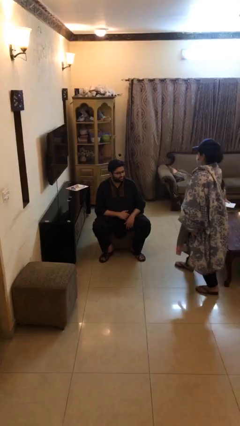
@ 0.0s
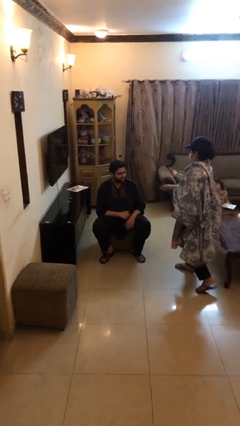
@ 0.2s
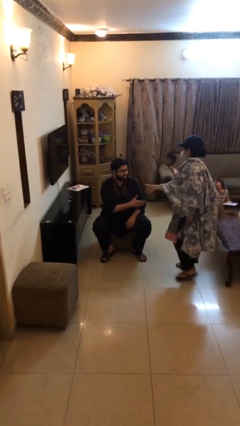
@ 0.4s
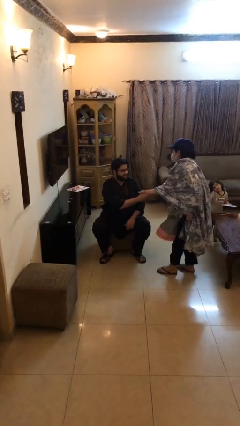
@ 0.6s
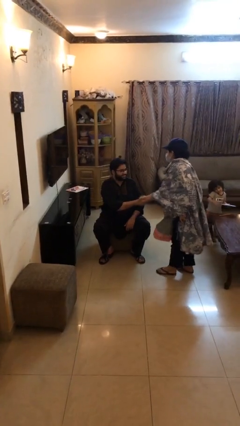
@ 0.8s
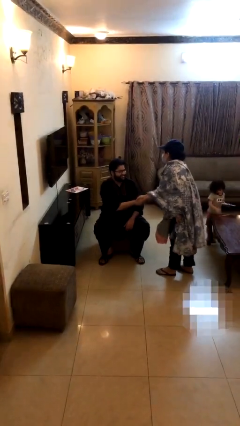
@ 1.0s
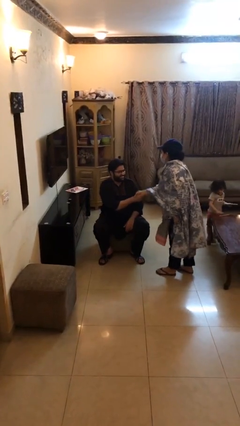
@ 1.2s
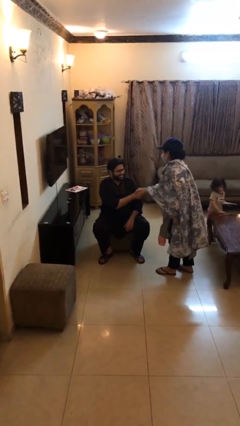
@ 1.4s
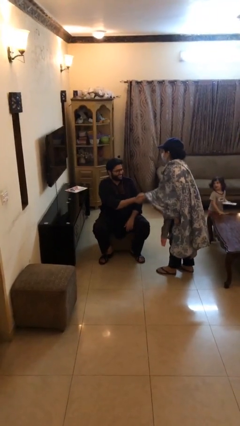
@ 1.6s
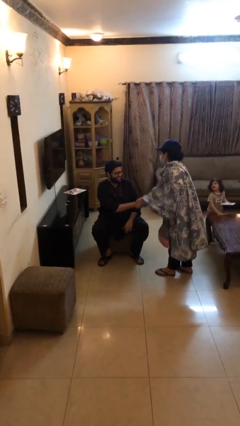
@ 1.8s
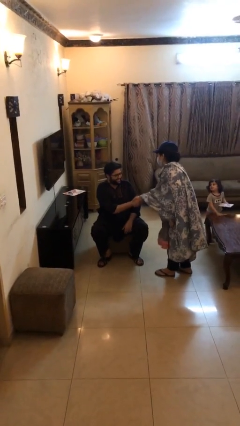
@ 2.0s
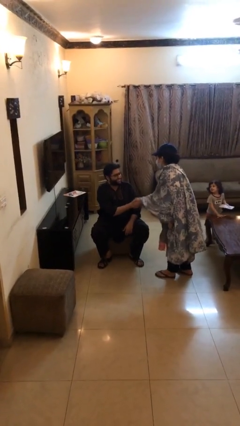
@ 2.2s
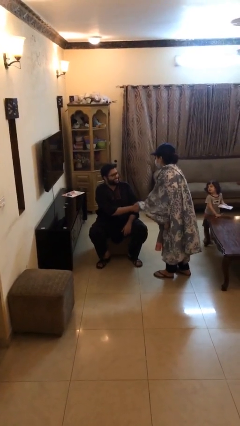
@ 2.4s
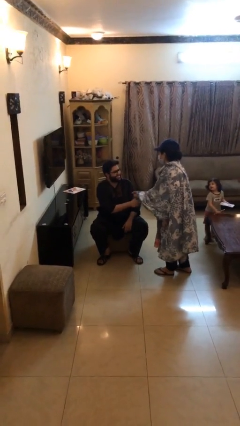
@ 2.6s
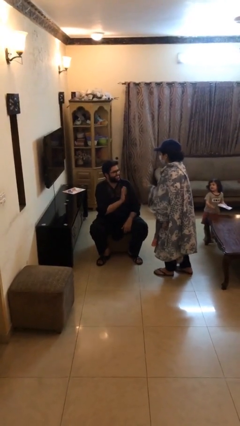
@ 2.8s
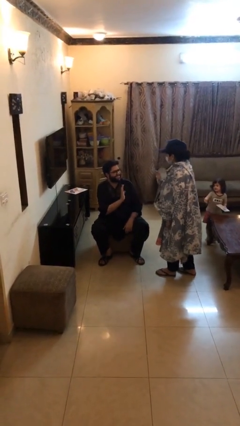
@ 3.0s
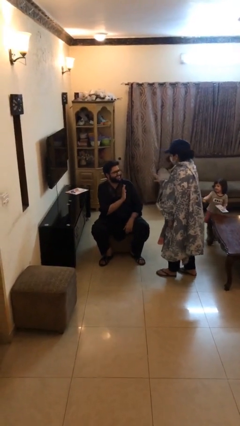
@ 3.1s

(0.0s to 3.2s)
person shakes hand

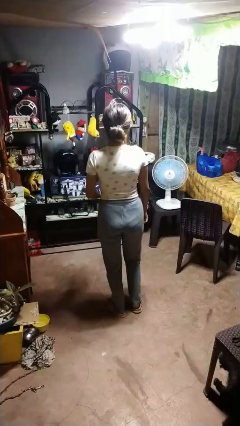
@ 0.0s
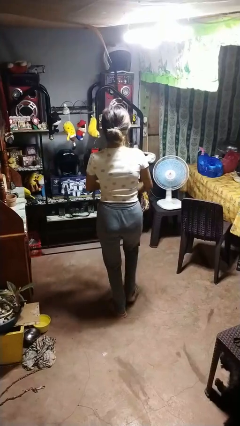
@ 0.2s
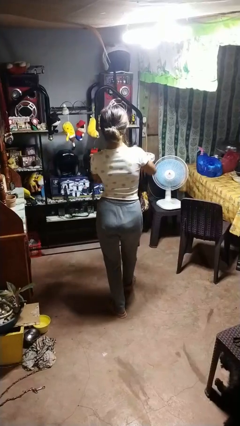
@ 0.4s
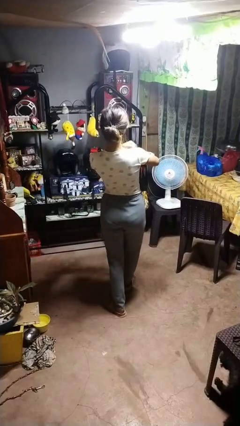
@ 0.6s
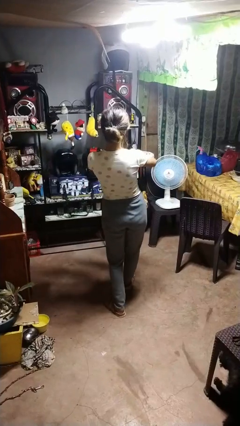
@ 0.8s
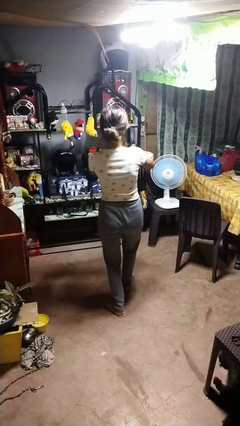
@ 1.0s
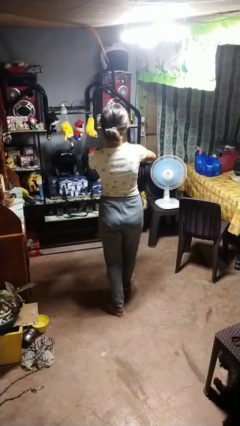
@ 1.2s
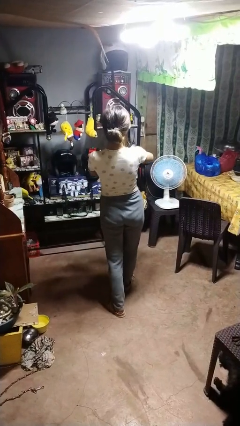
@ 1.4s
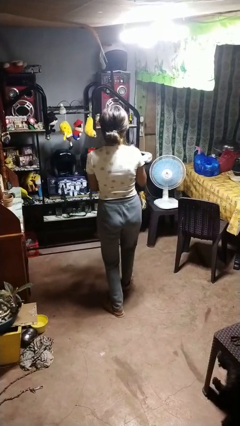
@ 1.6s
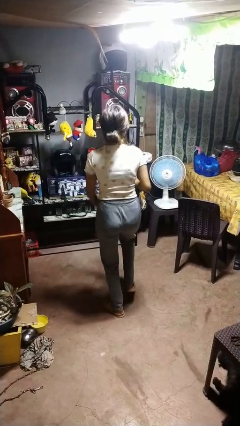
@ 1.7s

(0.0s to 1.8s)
person dances in place

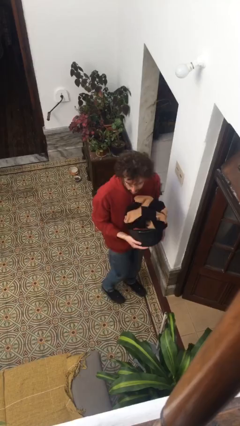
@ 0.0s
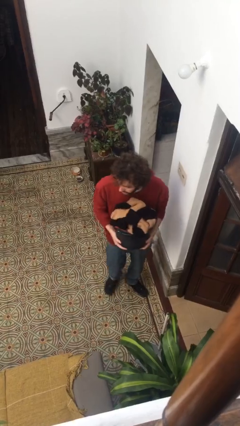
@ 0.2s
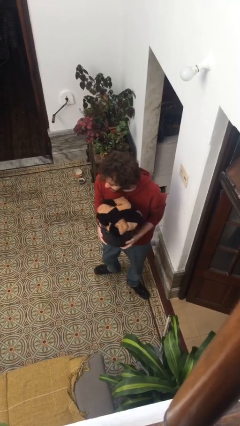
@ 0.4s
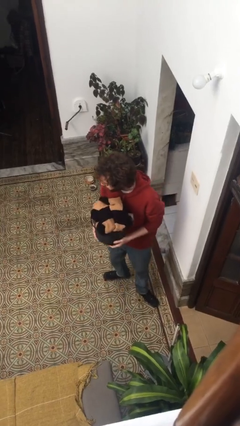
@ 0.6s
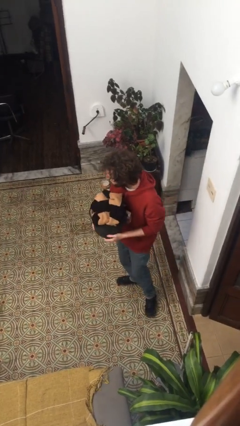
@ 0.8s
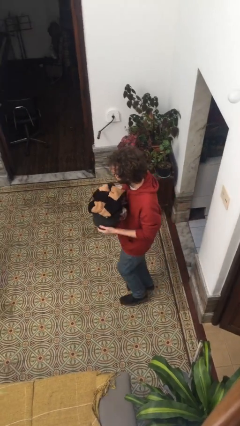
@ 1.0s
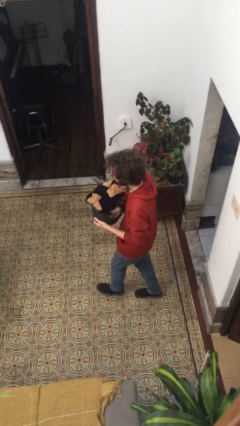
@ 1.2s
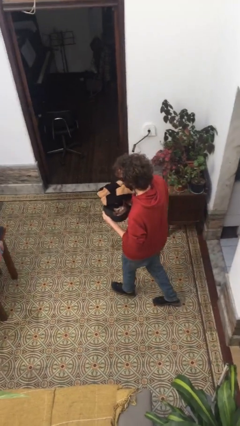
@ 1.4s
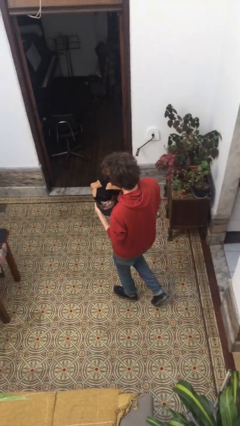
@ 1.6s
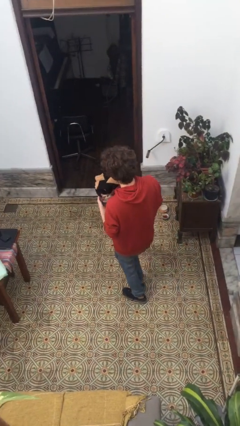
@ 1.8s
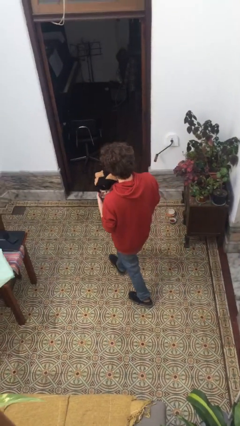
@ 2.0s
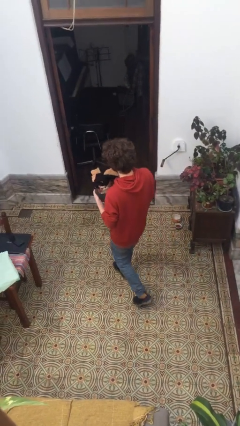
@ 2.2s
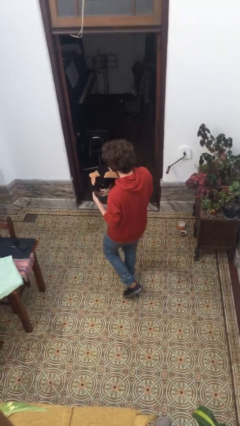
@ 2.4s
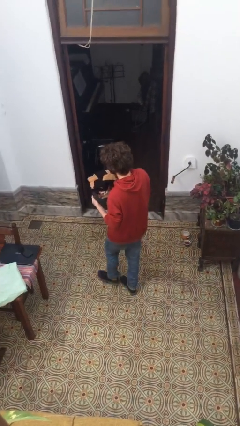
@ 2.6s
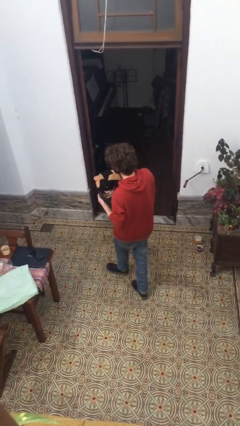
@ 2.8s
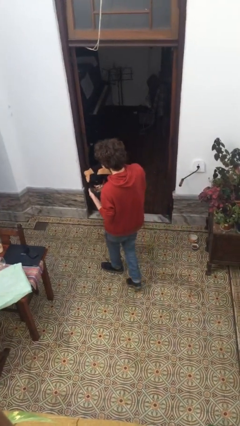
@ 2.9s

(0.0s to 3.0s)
person carries laundry basket

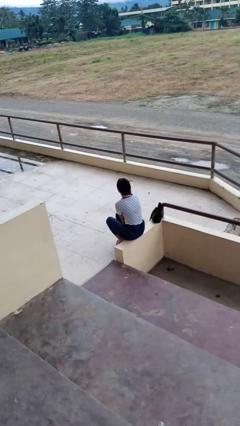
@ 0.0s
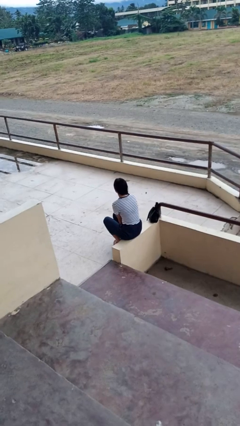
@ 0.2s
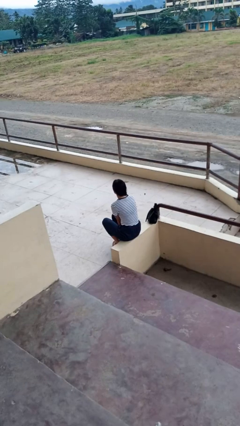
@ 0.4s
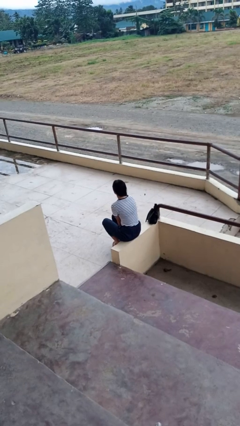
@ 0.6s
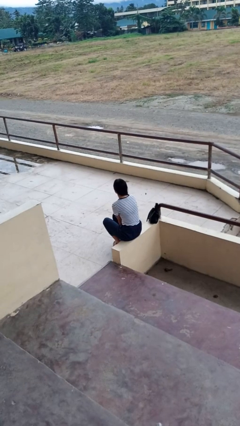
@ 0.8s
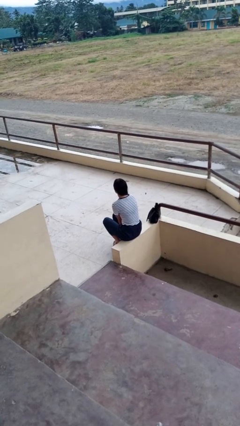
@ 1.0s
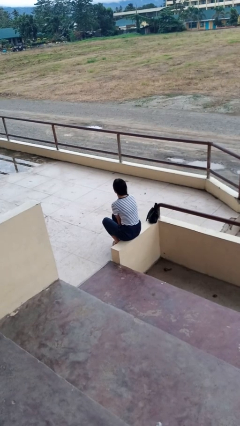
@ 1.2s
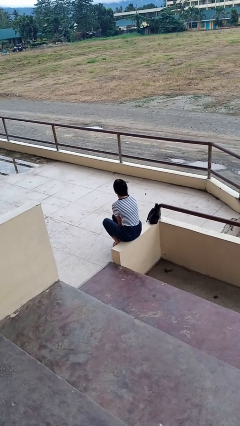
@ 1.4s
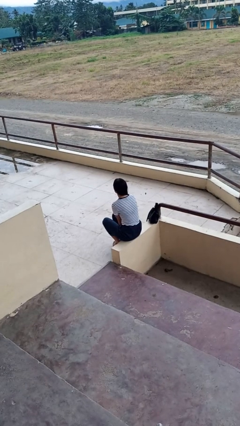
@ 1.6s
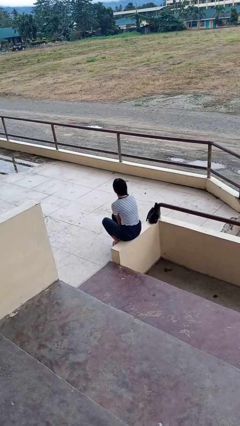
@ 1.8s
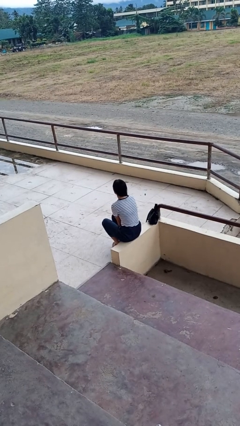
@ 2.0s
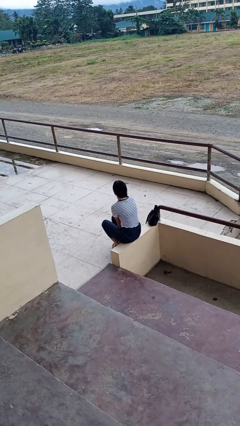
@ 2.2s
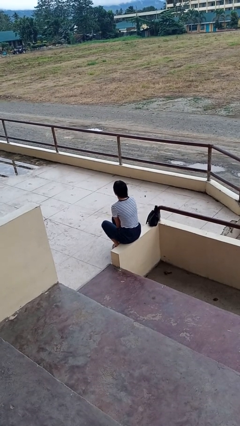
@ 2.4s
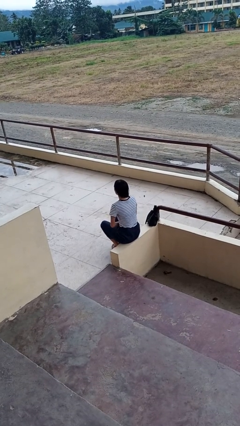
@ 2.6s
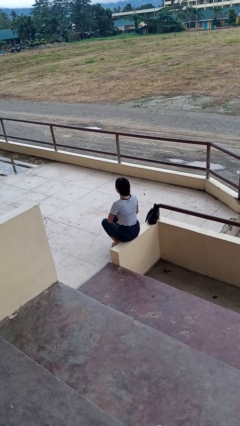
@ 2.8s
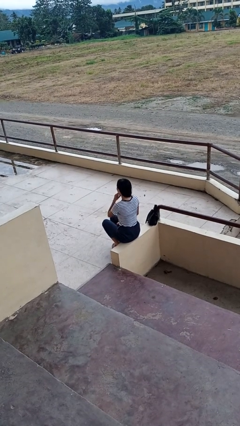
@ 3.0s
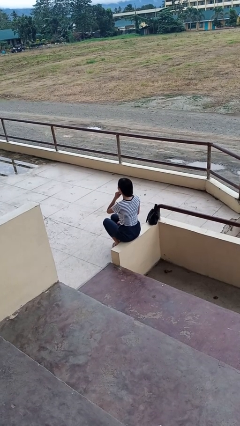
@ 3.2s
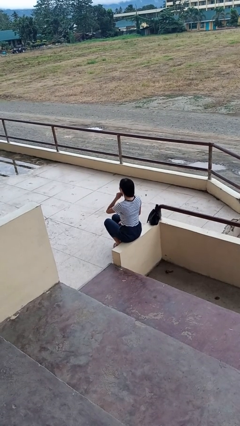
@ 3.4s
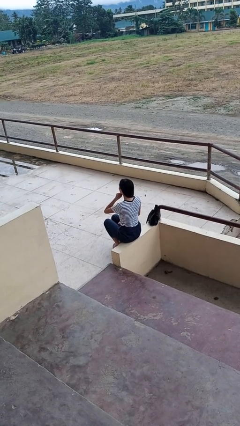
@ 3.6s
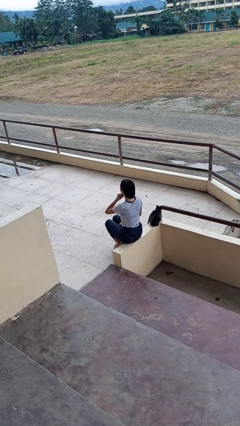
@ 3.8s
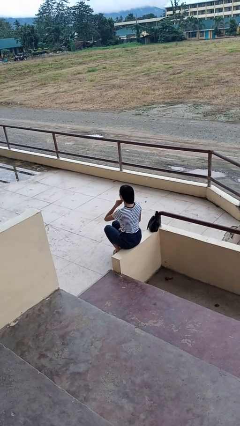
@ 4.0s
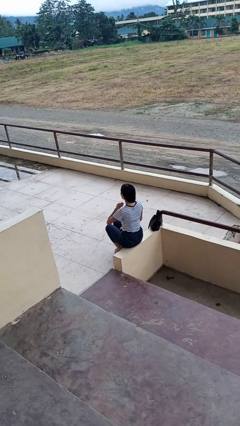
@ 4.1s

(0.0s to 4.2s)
person strokes chin

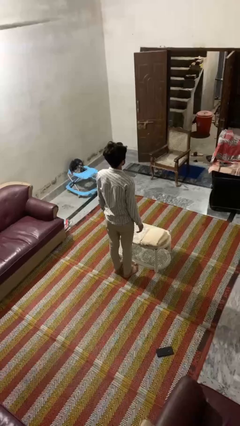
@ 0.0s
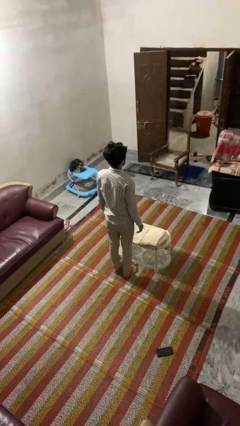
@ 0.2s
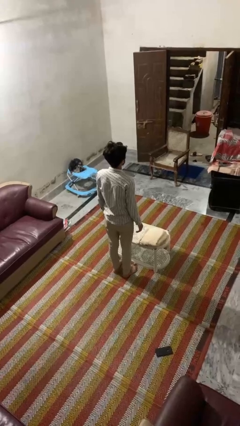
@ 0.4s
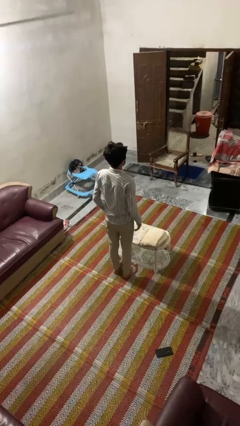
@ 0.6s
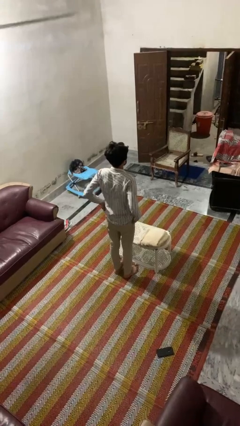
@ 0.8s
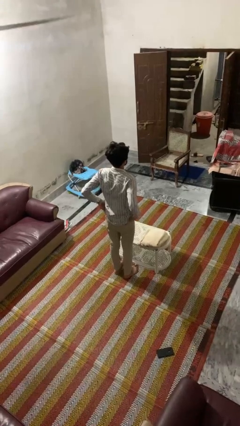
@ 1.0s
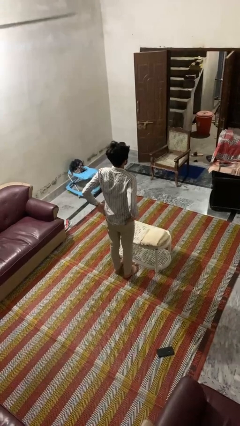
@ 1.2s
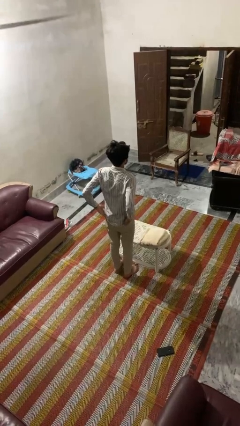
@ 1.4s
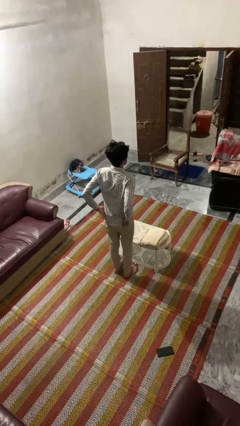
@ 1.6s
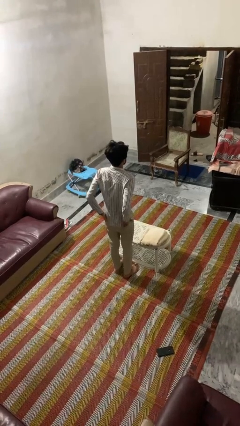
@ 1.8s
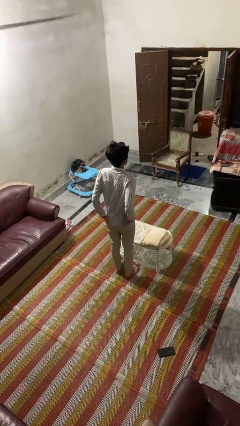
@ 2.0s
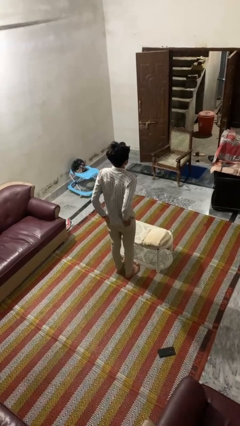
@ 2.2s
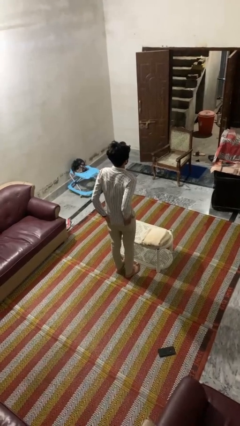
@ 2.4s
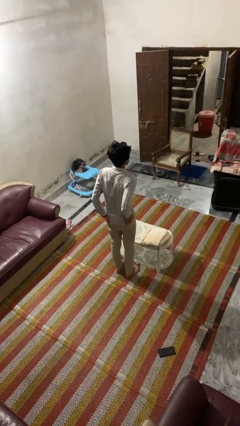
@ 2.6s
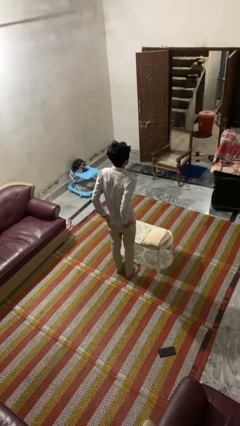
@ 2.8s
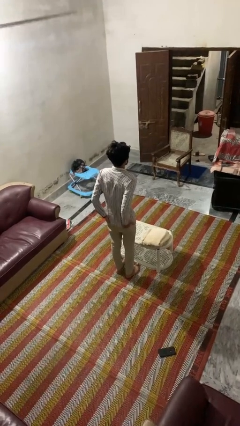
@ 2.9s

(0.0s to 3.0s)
person puts hands in back pockets

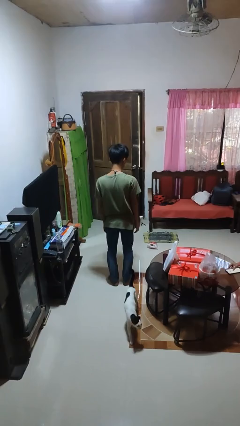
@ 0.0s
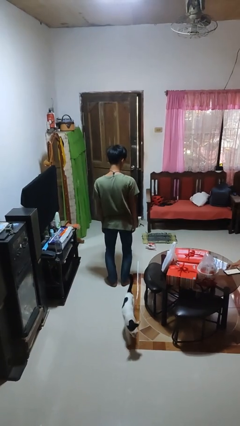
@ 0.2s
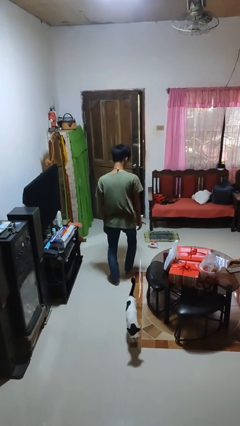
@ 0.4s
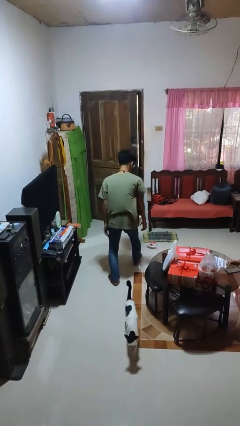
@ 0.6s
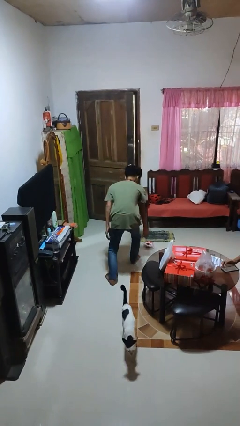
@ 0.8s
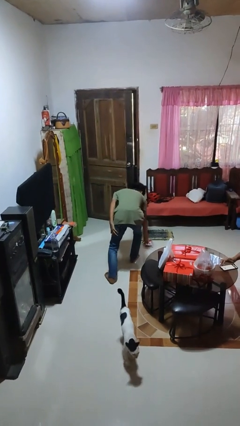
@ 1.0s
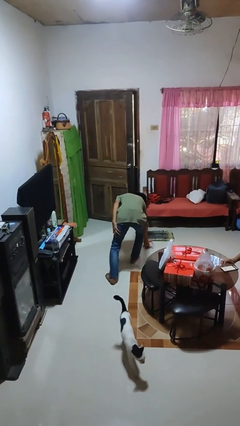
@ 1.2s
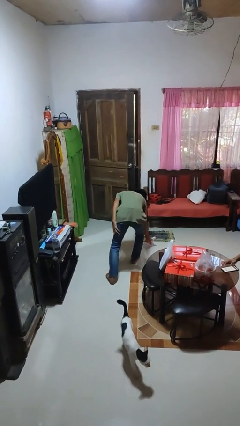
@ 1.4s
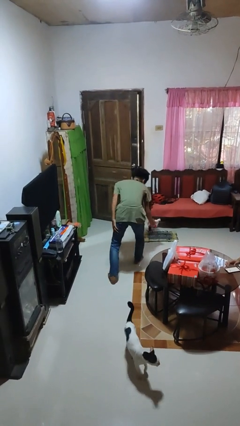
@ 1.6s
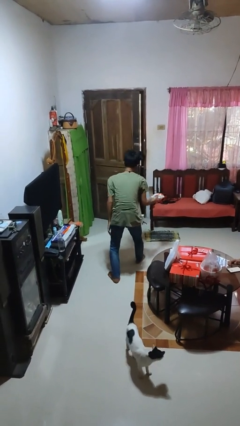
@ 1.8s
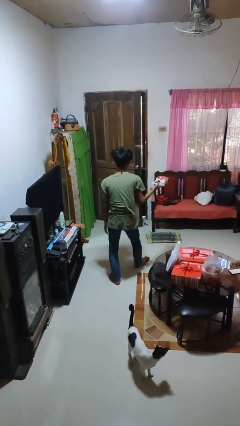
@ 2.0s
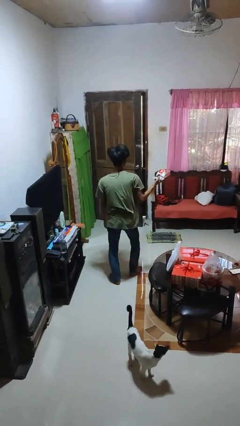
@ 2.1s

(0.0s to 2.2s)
person picks up object from floor

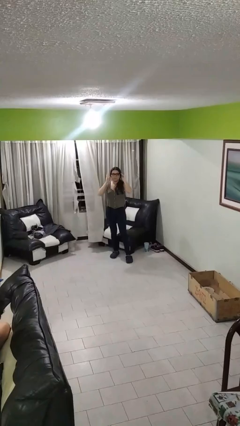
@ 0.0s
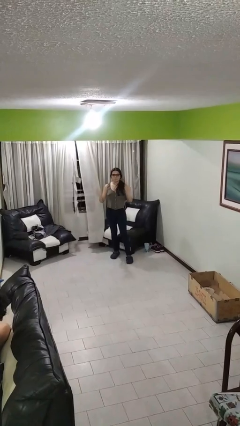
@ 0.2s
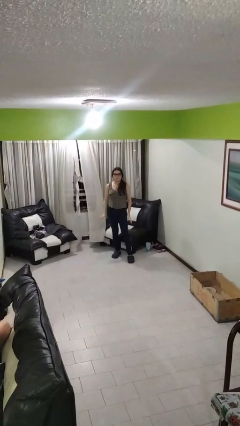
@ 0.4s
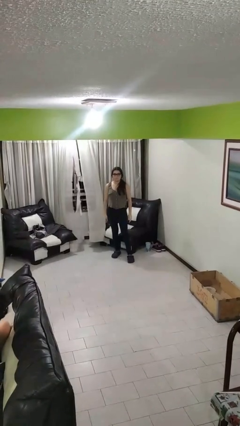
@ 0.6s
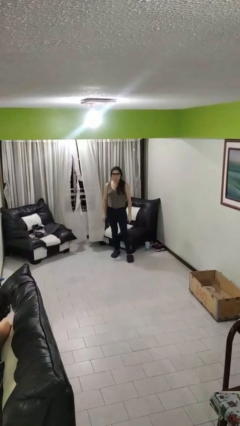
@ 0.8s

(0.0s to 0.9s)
person puts on glasses
